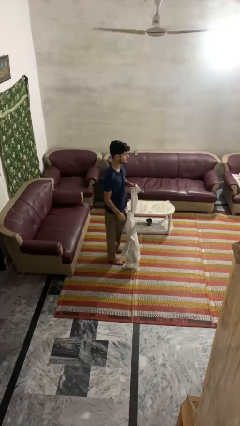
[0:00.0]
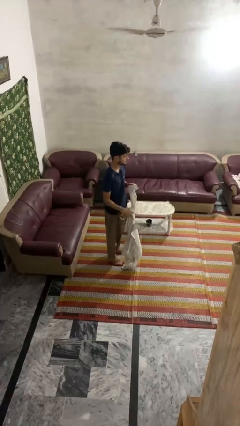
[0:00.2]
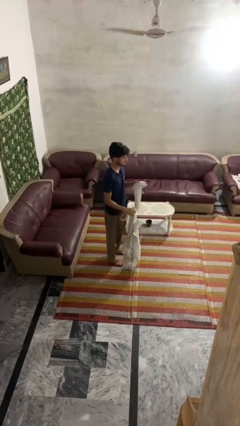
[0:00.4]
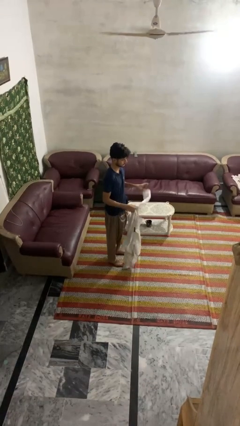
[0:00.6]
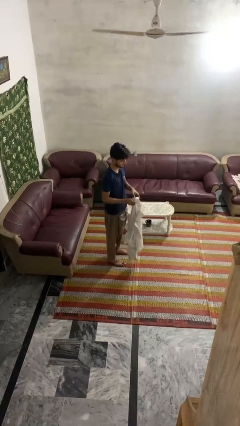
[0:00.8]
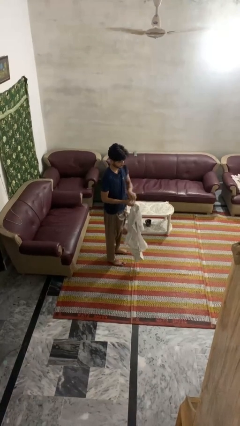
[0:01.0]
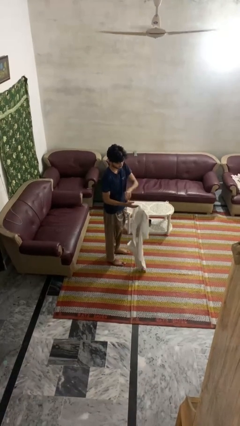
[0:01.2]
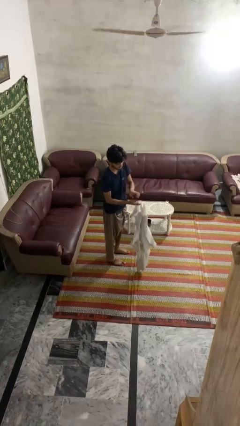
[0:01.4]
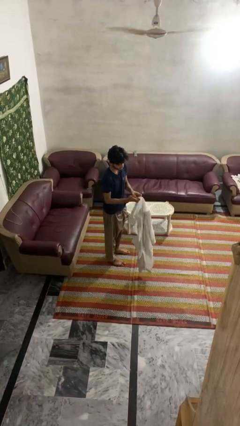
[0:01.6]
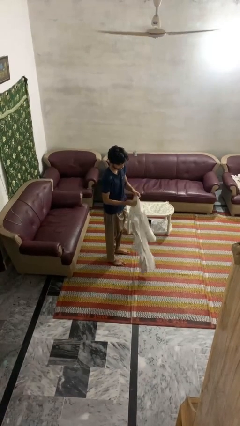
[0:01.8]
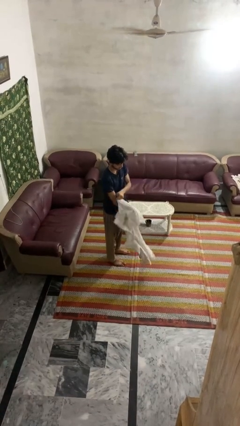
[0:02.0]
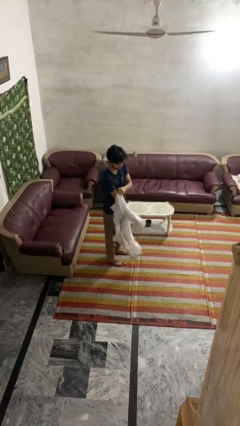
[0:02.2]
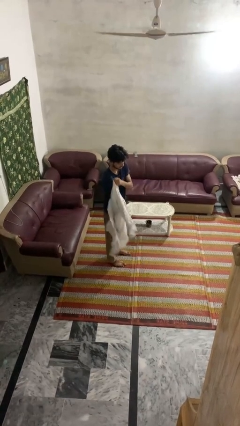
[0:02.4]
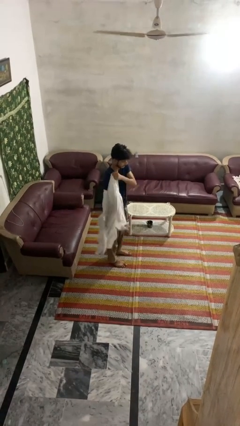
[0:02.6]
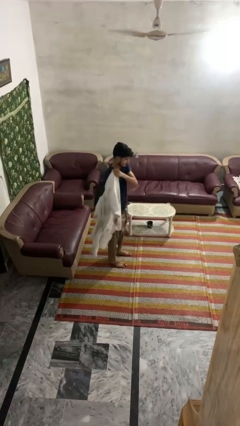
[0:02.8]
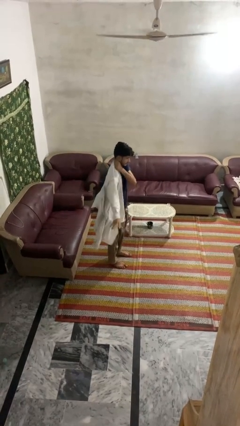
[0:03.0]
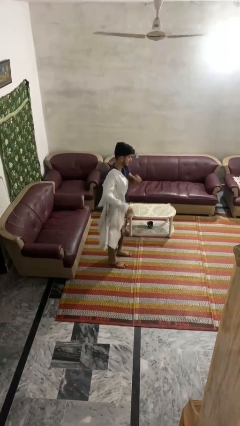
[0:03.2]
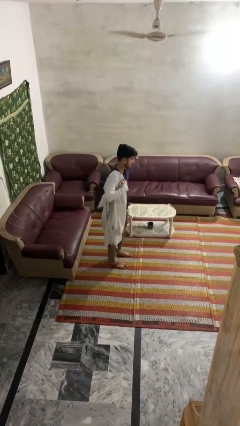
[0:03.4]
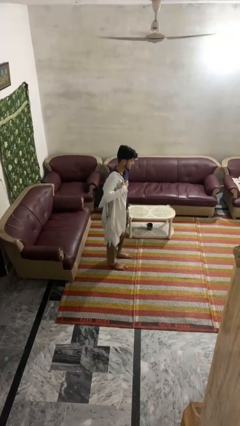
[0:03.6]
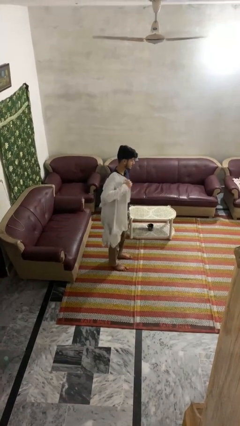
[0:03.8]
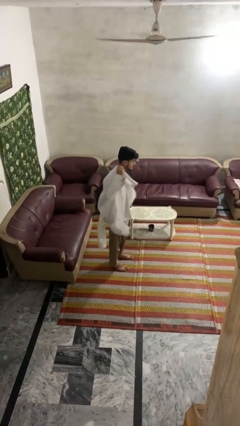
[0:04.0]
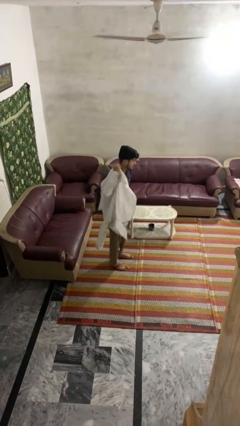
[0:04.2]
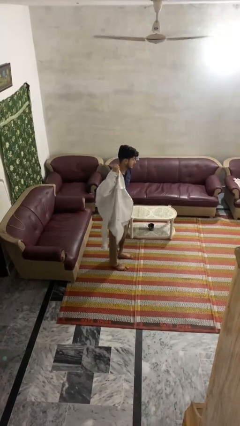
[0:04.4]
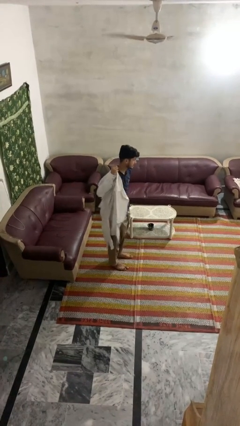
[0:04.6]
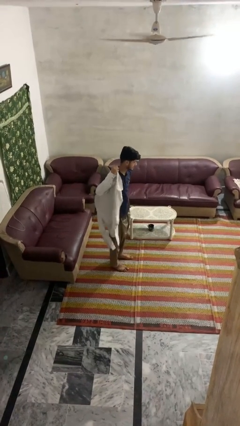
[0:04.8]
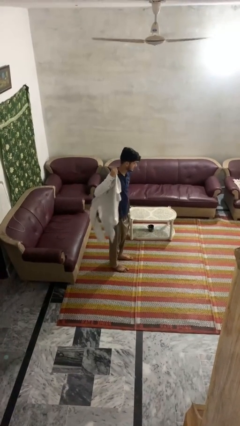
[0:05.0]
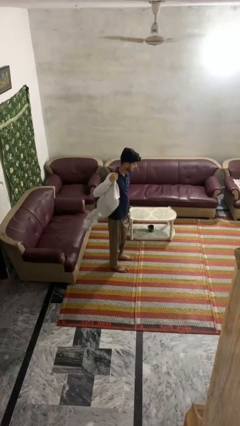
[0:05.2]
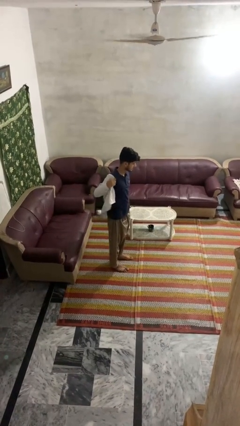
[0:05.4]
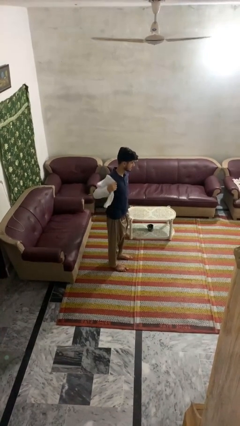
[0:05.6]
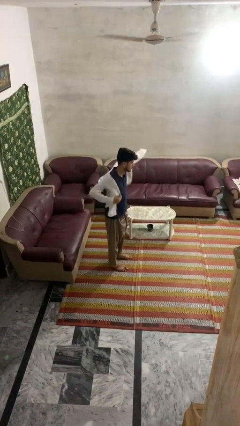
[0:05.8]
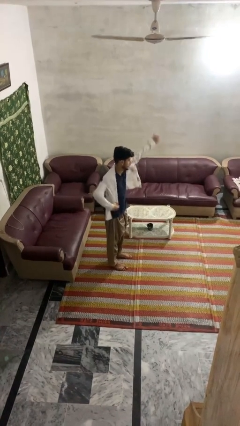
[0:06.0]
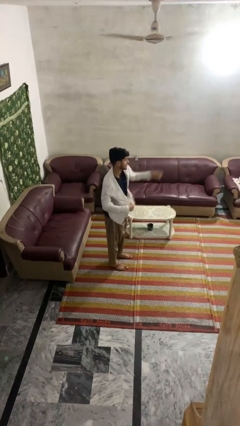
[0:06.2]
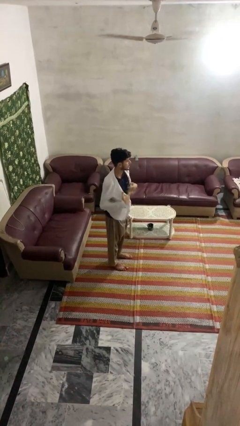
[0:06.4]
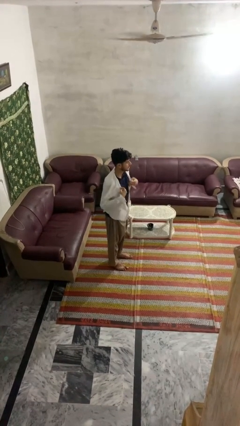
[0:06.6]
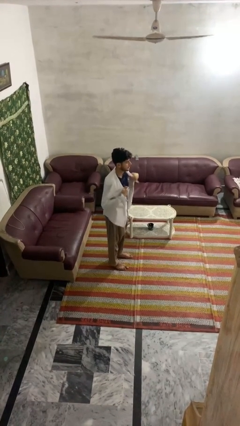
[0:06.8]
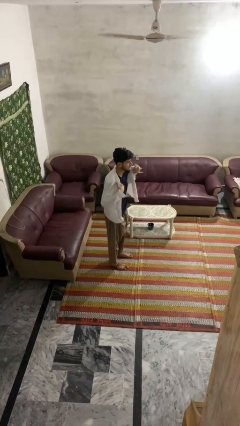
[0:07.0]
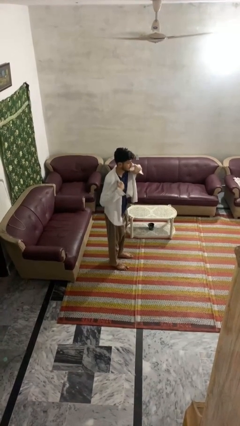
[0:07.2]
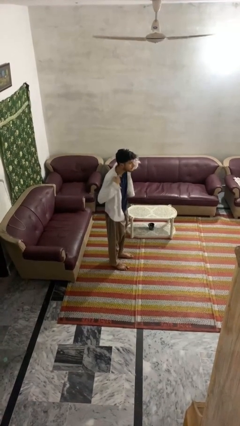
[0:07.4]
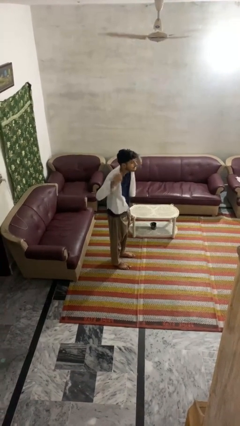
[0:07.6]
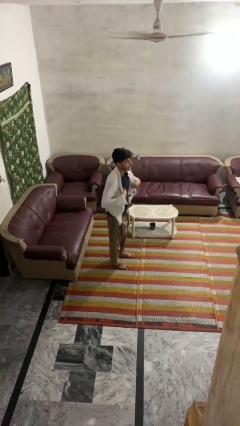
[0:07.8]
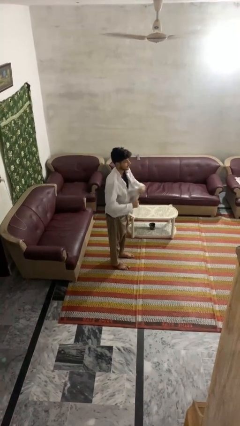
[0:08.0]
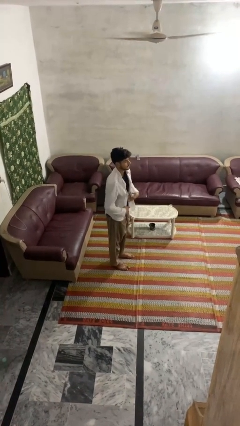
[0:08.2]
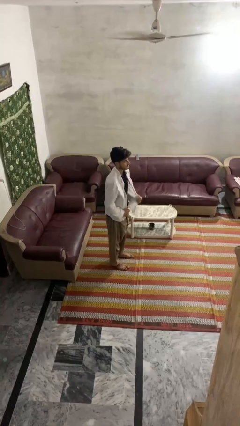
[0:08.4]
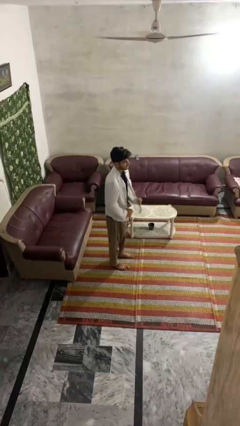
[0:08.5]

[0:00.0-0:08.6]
person puts on shirt

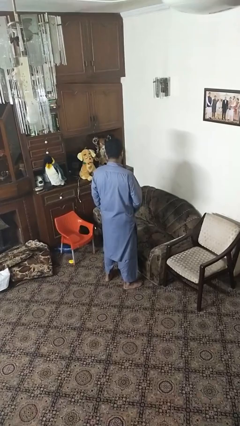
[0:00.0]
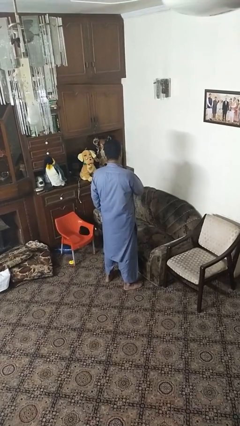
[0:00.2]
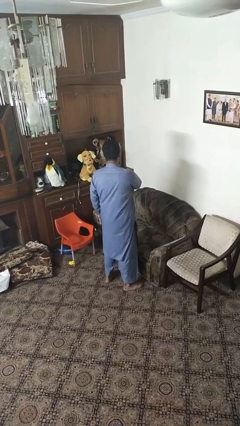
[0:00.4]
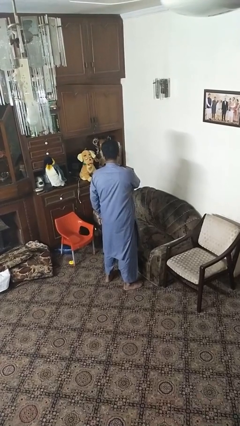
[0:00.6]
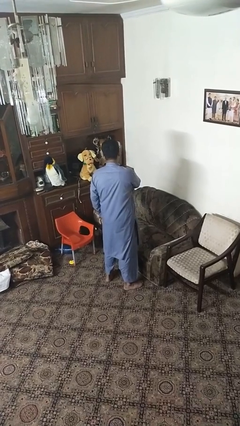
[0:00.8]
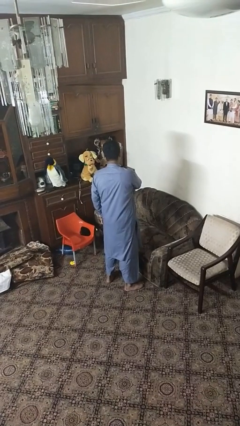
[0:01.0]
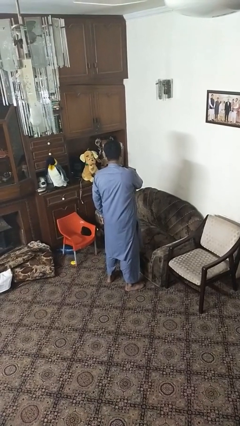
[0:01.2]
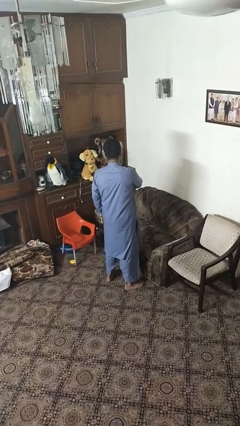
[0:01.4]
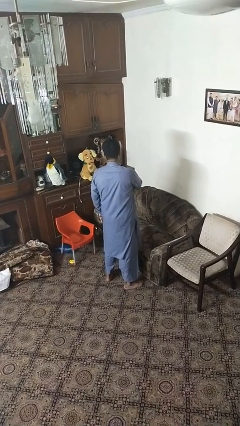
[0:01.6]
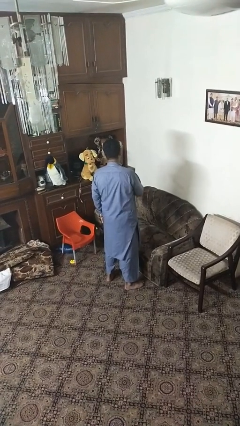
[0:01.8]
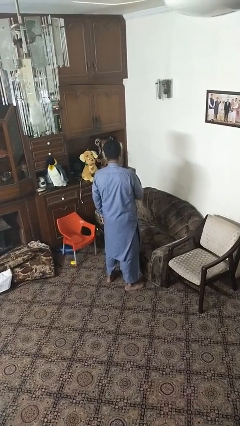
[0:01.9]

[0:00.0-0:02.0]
person strokes chin

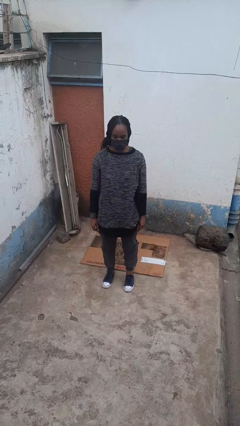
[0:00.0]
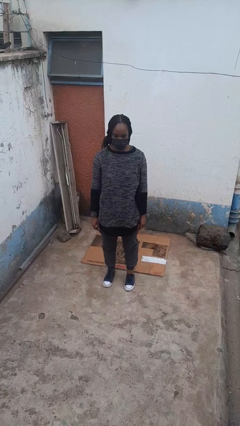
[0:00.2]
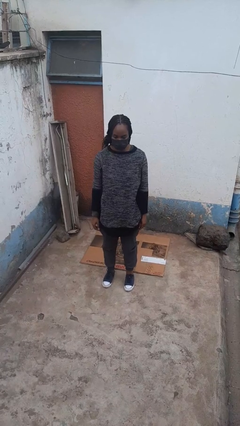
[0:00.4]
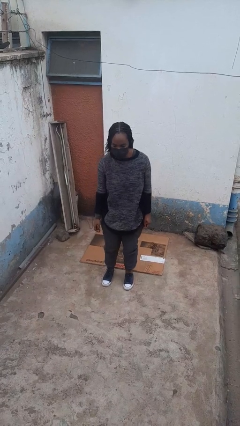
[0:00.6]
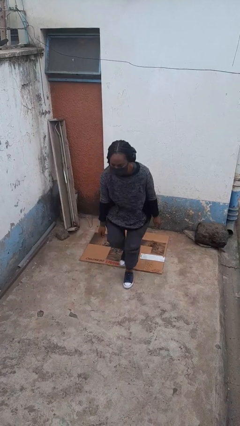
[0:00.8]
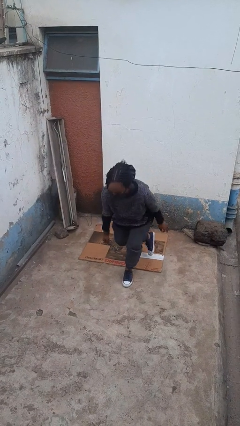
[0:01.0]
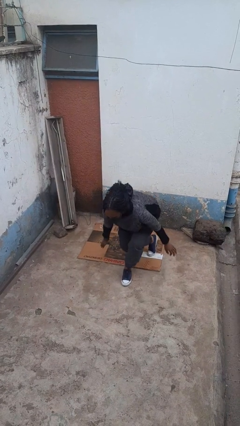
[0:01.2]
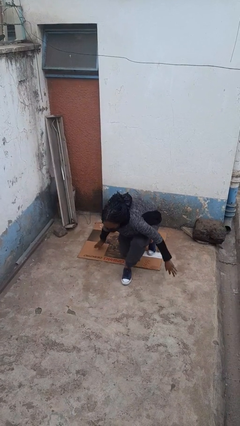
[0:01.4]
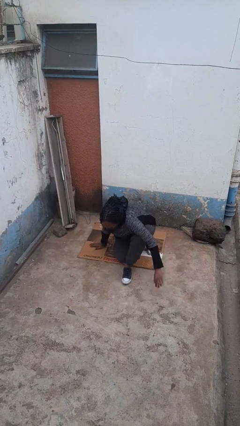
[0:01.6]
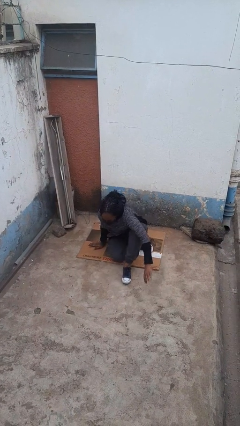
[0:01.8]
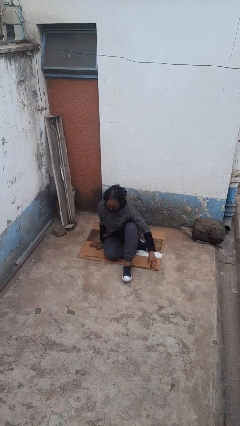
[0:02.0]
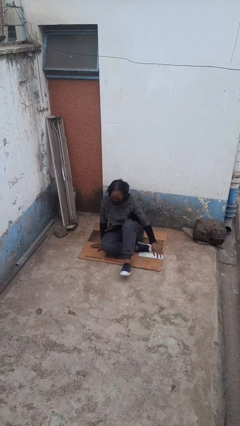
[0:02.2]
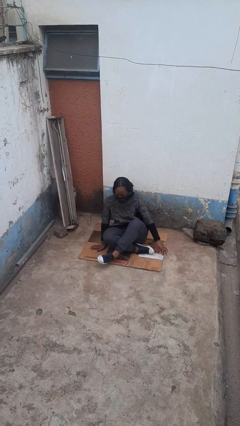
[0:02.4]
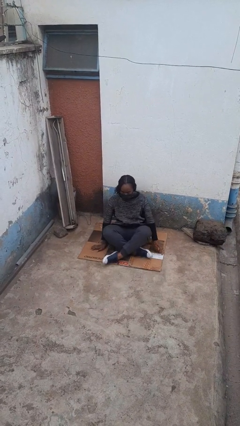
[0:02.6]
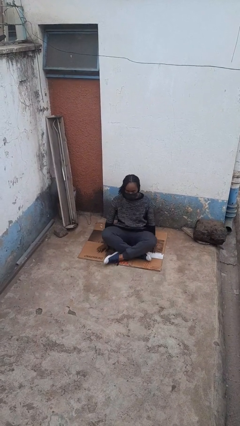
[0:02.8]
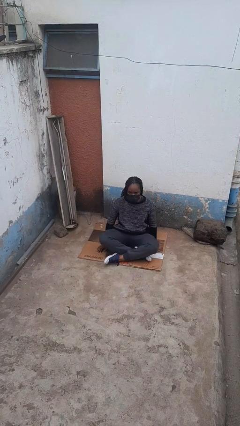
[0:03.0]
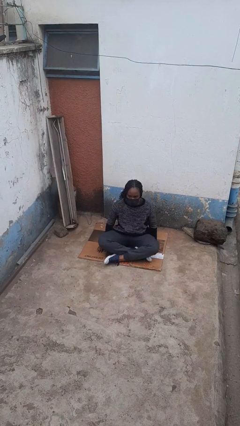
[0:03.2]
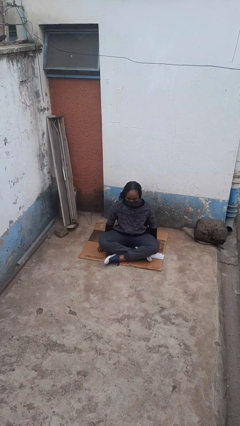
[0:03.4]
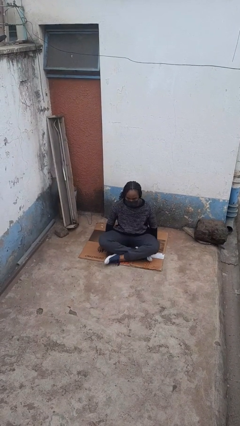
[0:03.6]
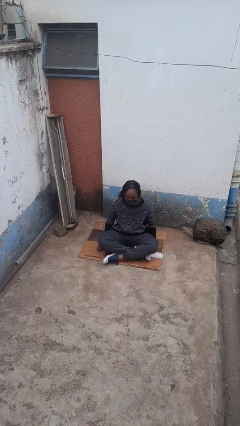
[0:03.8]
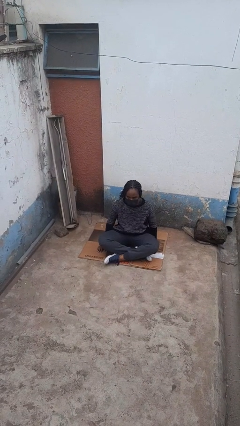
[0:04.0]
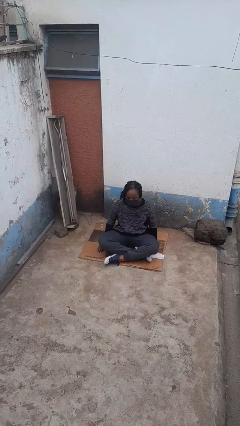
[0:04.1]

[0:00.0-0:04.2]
person sits crisscross

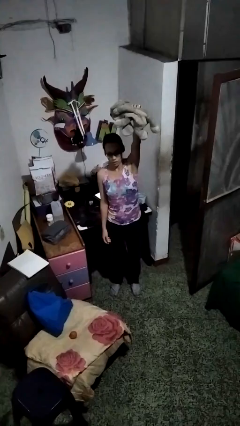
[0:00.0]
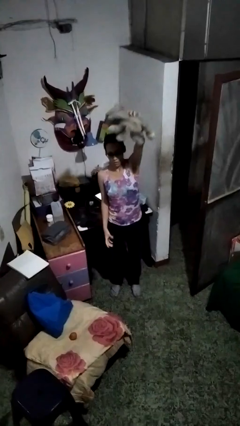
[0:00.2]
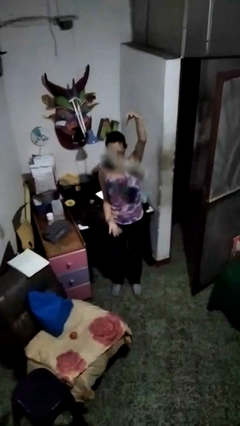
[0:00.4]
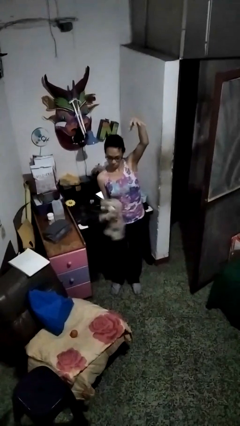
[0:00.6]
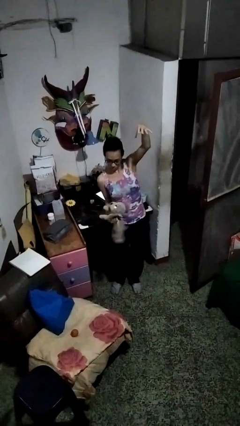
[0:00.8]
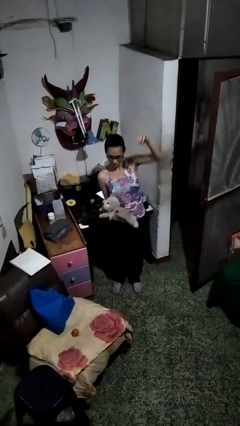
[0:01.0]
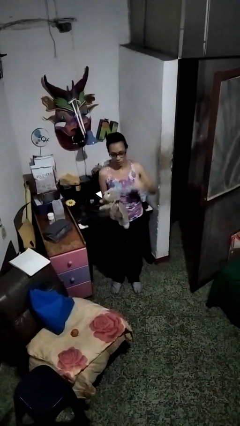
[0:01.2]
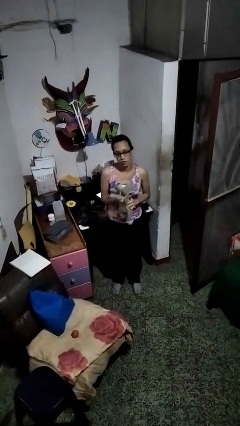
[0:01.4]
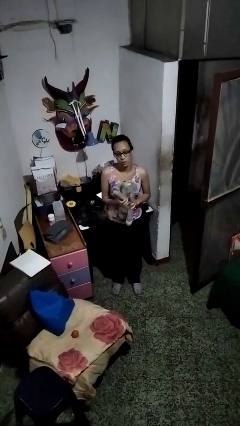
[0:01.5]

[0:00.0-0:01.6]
person catches dropped object

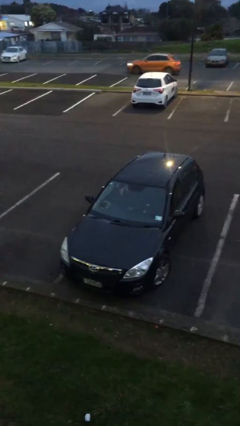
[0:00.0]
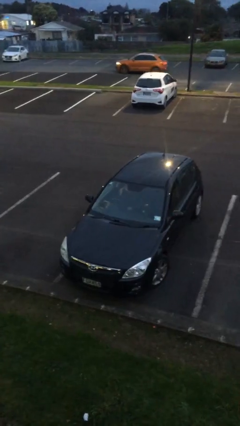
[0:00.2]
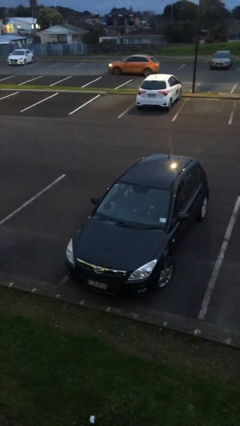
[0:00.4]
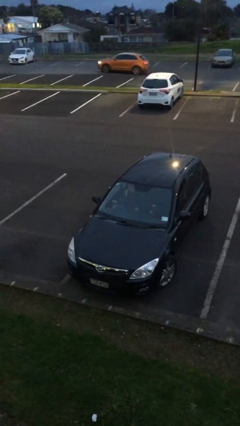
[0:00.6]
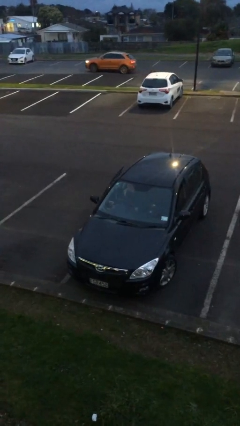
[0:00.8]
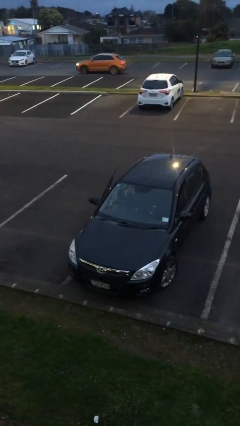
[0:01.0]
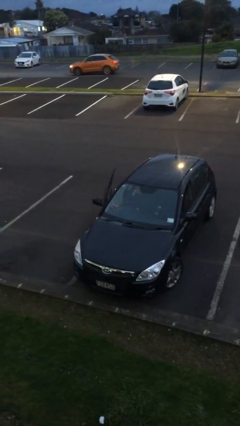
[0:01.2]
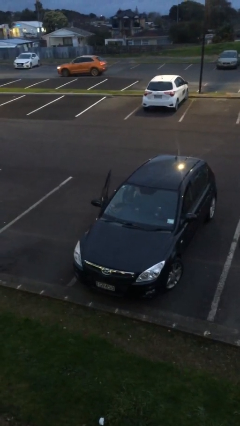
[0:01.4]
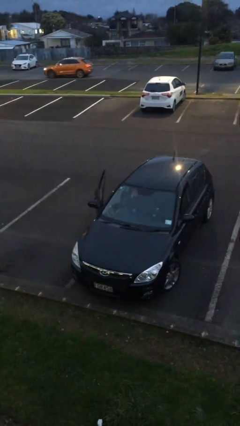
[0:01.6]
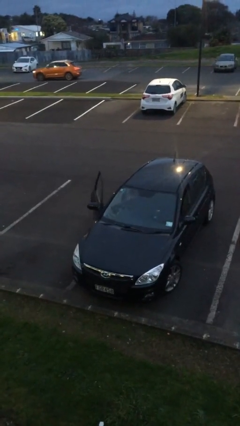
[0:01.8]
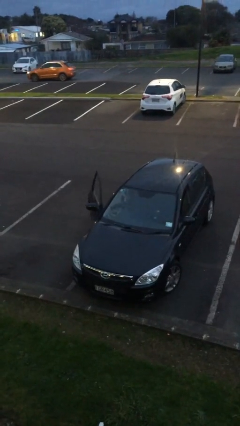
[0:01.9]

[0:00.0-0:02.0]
person opens car door
